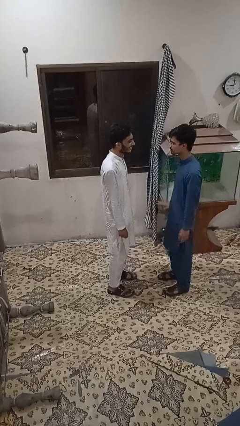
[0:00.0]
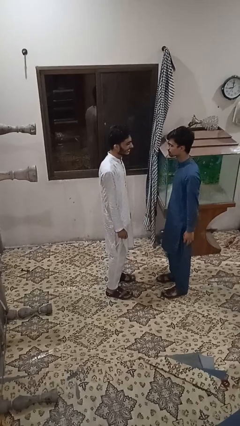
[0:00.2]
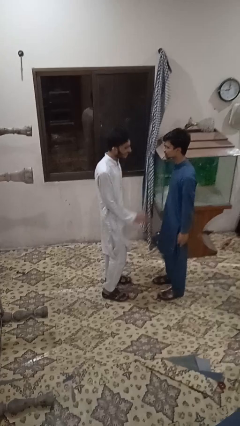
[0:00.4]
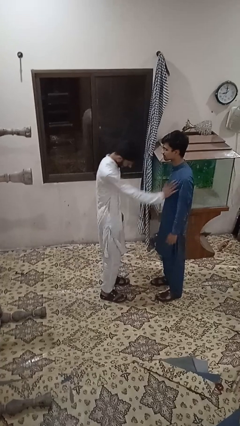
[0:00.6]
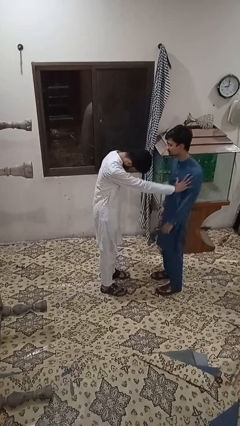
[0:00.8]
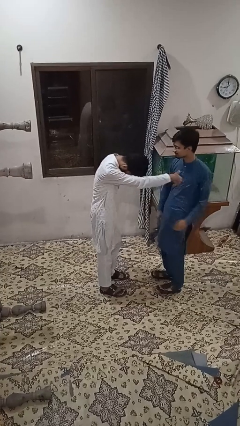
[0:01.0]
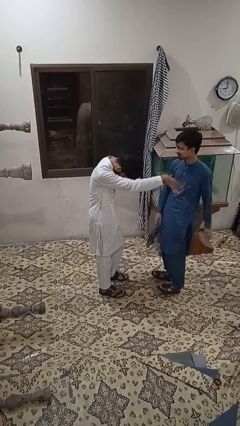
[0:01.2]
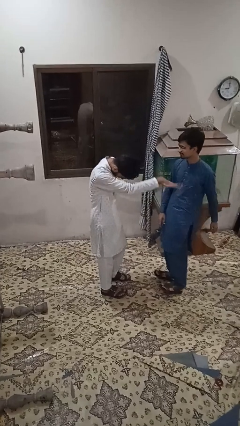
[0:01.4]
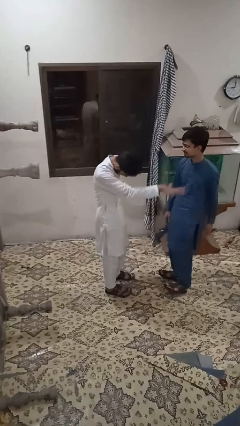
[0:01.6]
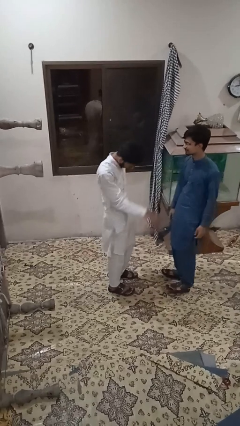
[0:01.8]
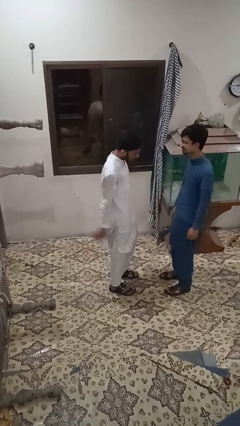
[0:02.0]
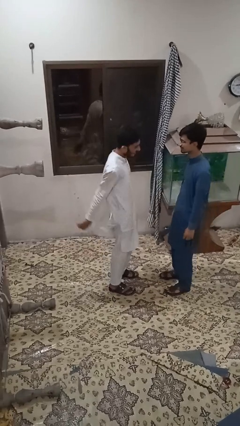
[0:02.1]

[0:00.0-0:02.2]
person shoves person

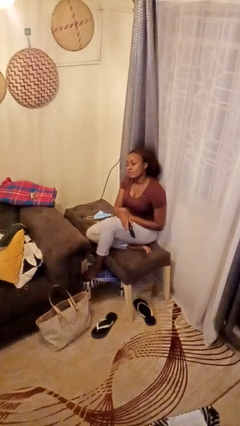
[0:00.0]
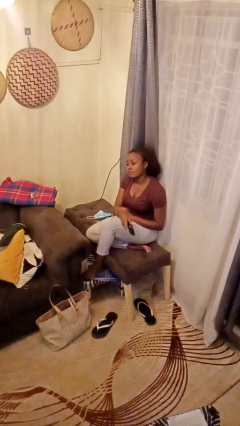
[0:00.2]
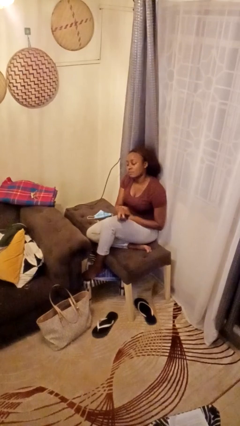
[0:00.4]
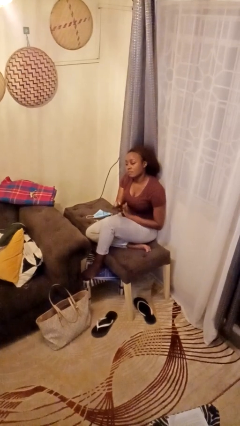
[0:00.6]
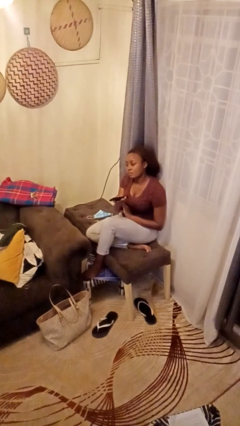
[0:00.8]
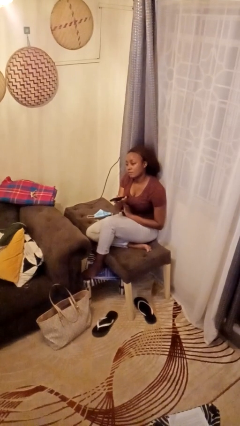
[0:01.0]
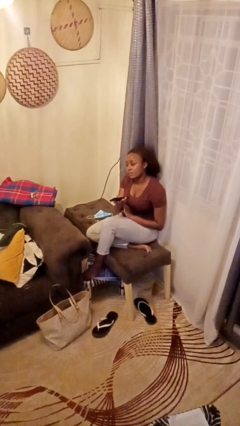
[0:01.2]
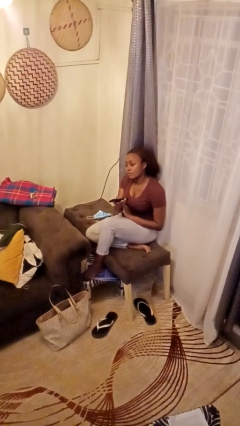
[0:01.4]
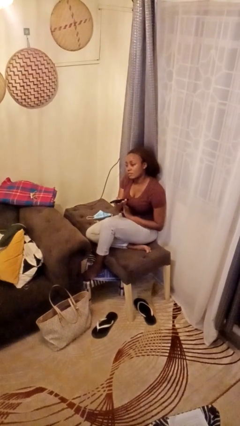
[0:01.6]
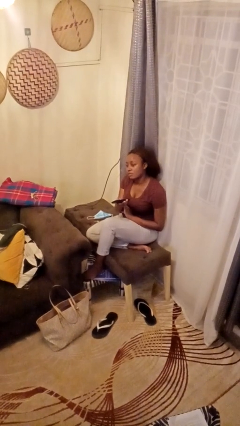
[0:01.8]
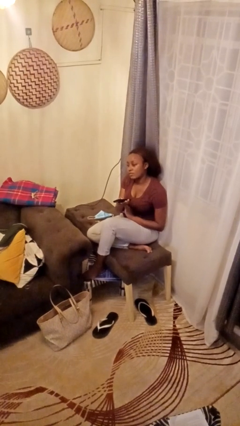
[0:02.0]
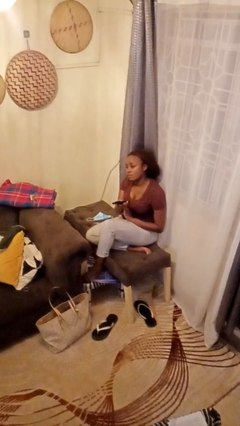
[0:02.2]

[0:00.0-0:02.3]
person uses television remote

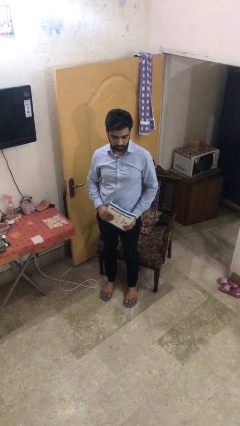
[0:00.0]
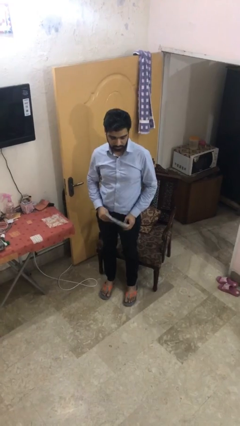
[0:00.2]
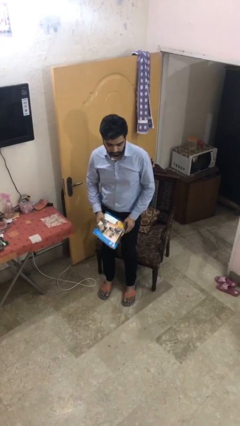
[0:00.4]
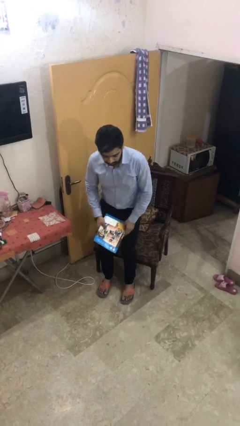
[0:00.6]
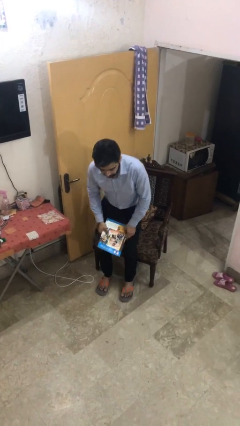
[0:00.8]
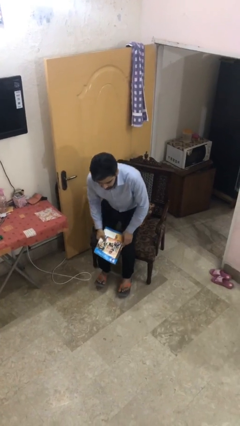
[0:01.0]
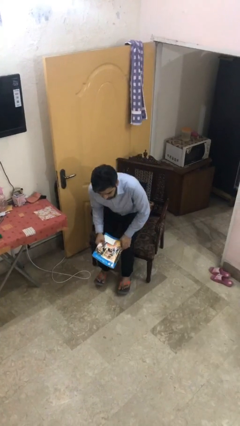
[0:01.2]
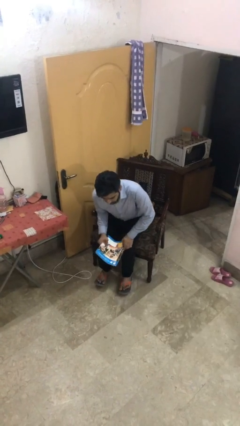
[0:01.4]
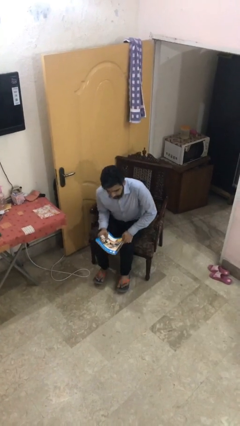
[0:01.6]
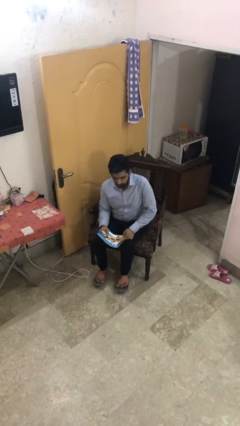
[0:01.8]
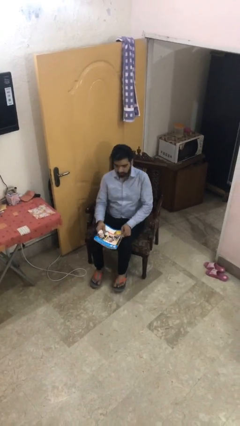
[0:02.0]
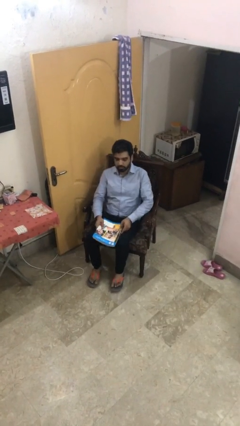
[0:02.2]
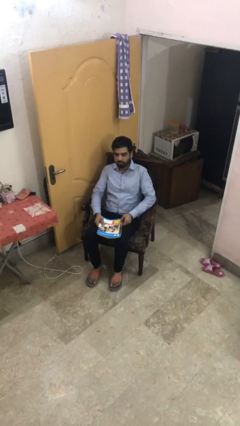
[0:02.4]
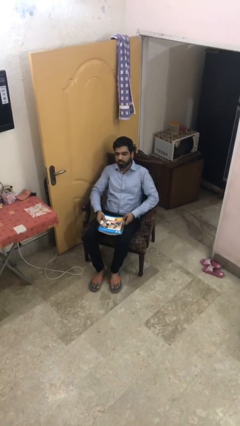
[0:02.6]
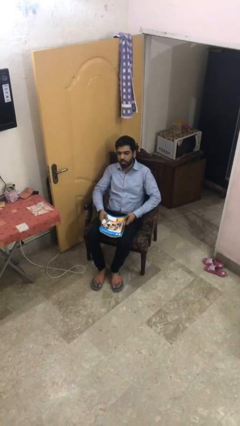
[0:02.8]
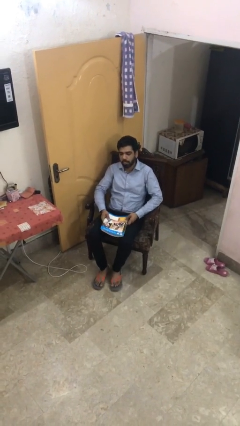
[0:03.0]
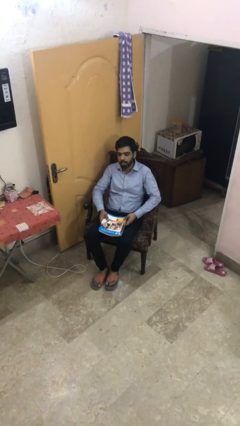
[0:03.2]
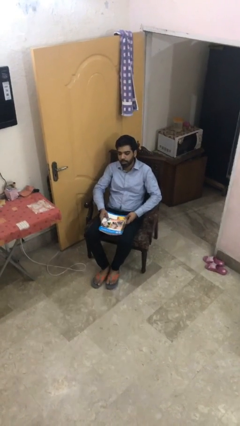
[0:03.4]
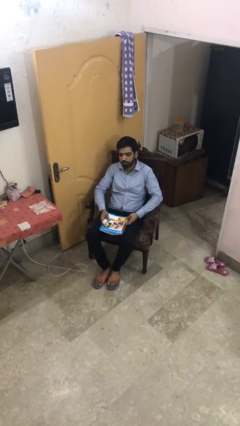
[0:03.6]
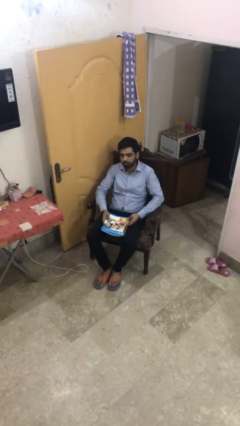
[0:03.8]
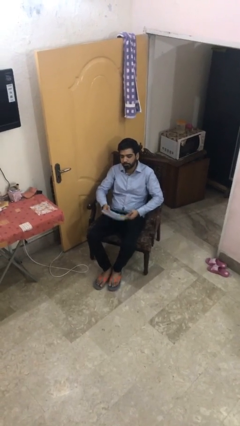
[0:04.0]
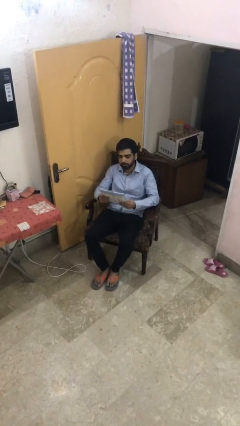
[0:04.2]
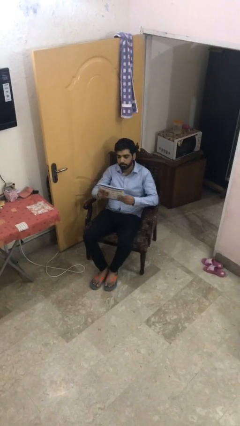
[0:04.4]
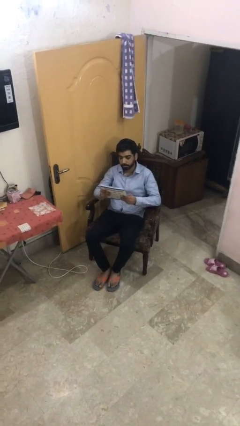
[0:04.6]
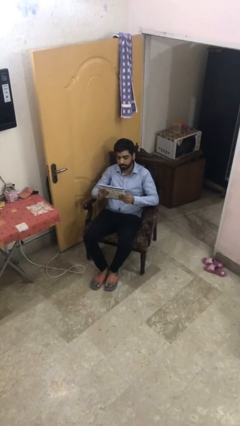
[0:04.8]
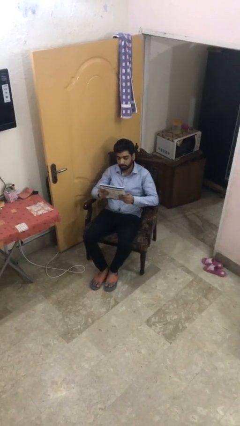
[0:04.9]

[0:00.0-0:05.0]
person sits down

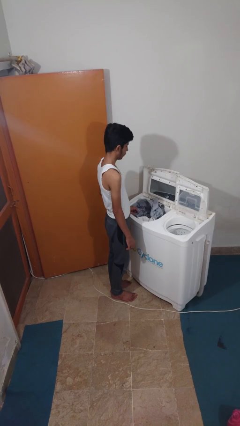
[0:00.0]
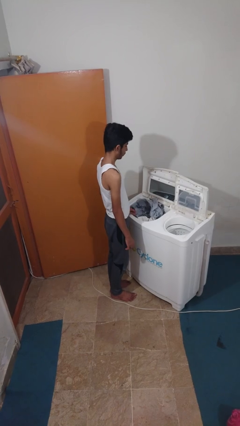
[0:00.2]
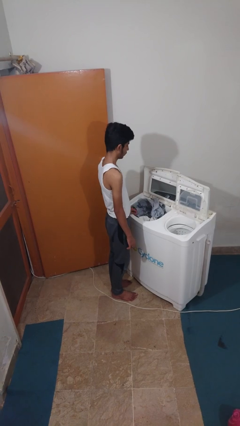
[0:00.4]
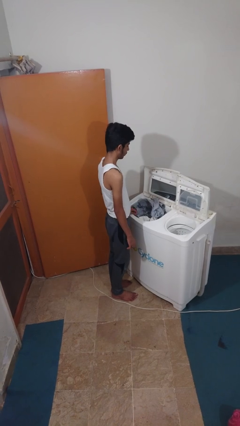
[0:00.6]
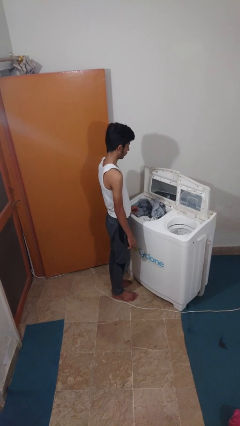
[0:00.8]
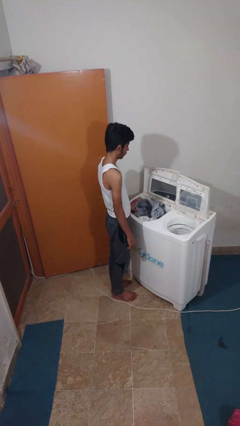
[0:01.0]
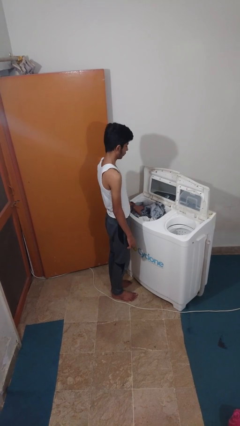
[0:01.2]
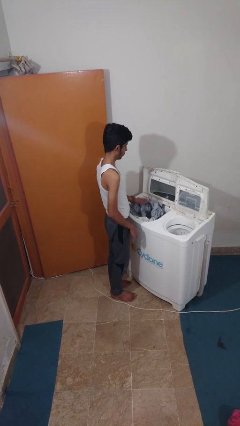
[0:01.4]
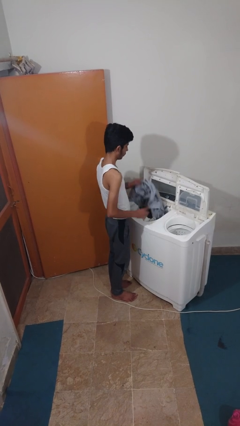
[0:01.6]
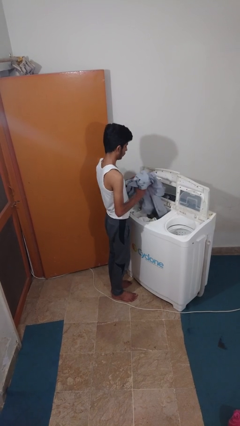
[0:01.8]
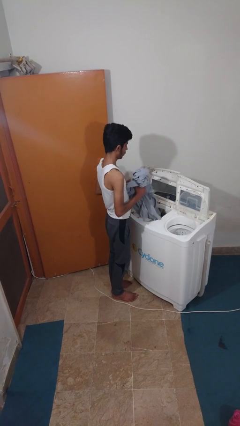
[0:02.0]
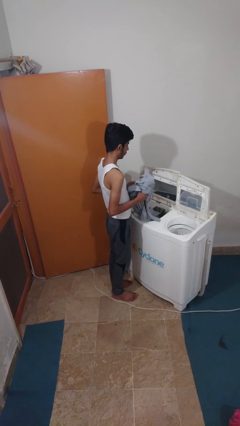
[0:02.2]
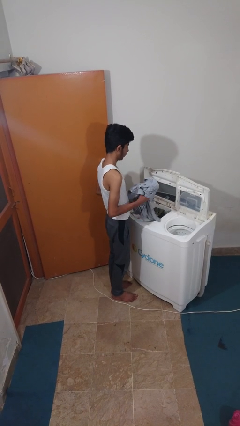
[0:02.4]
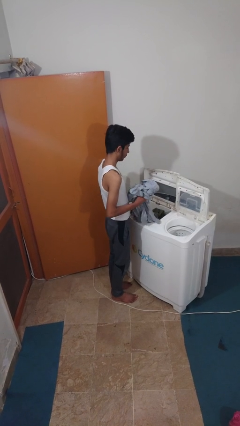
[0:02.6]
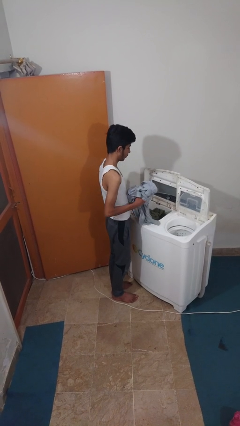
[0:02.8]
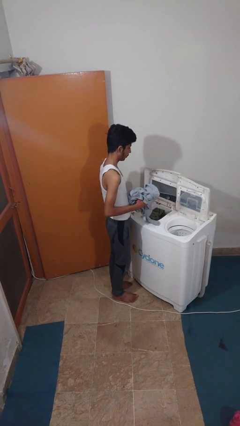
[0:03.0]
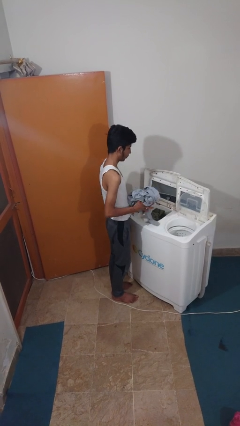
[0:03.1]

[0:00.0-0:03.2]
person unloads clotheswasher

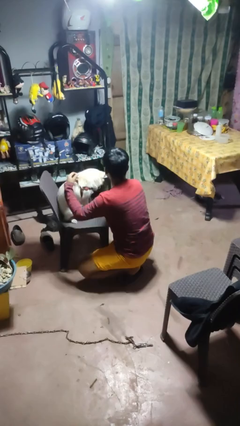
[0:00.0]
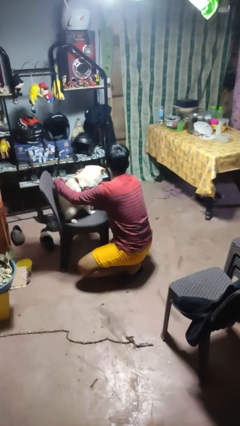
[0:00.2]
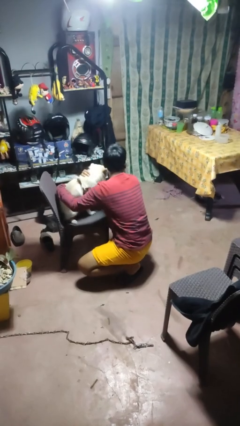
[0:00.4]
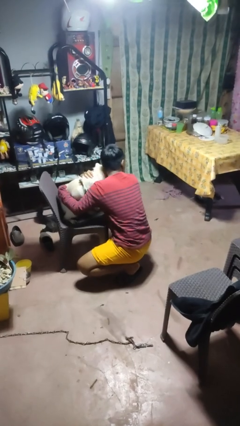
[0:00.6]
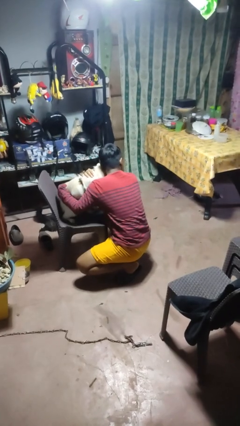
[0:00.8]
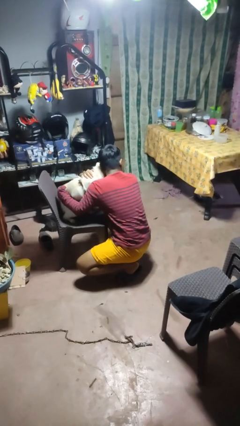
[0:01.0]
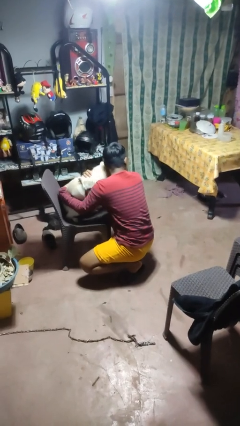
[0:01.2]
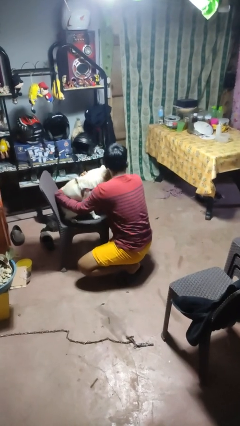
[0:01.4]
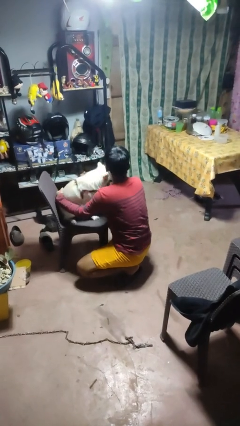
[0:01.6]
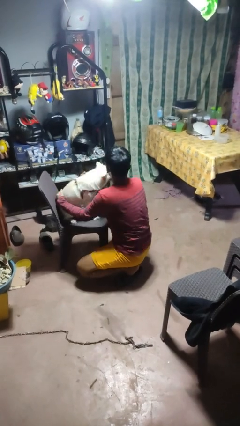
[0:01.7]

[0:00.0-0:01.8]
person hugs dog

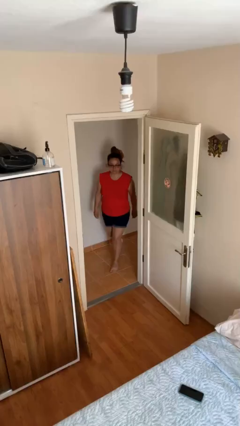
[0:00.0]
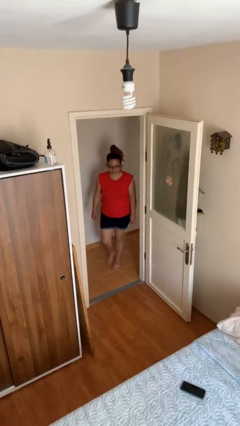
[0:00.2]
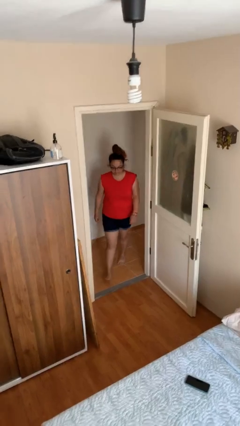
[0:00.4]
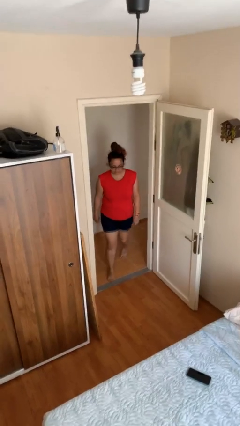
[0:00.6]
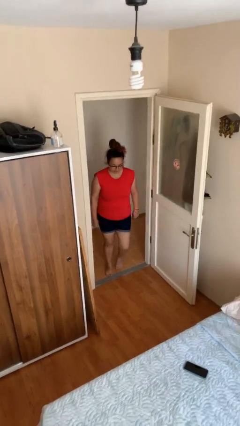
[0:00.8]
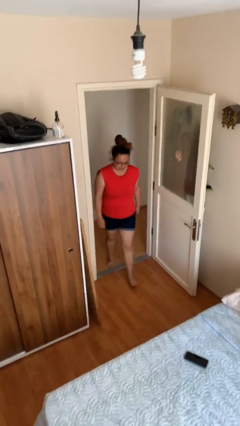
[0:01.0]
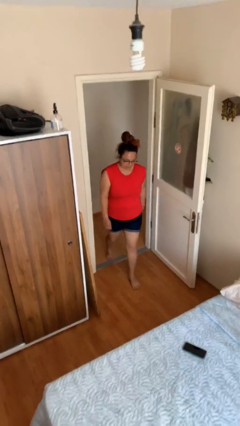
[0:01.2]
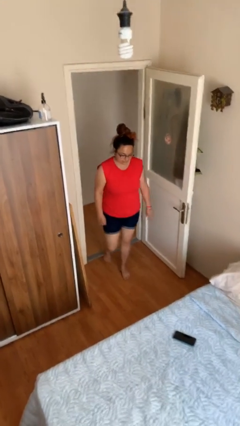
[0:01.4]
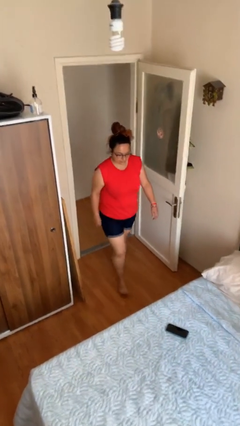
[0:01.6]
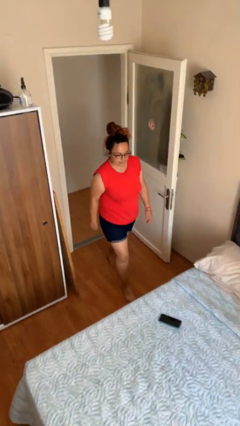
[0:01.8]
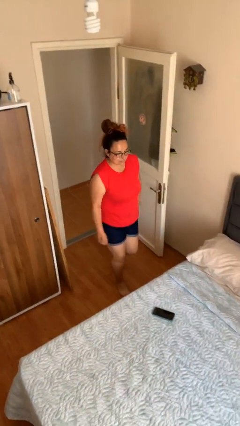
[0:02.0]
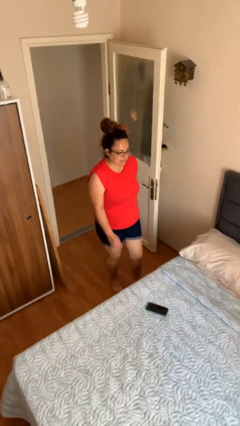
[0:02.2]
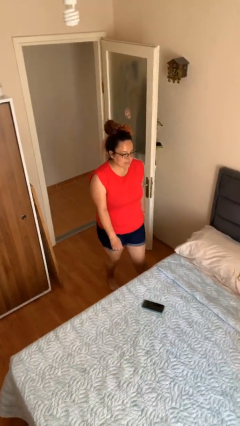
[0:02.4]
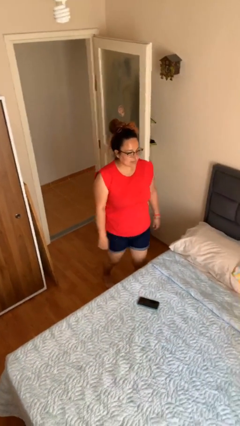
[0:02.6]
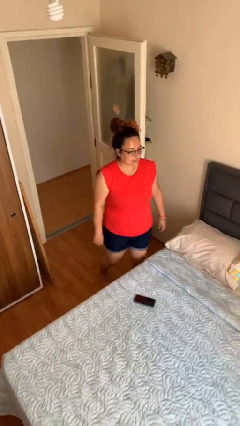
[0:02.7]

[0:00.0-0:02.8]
person enters scene through structure

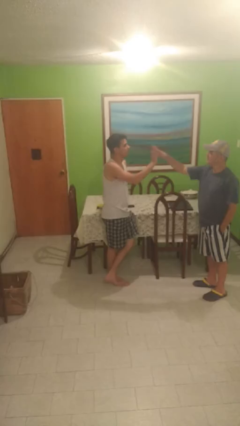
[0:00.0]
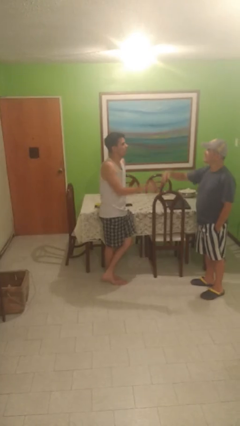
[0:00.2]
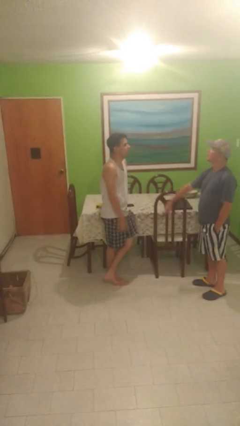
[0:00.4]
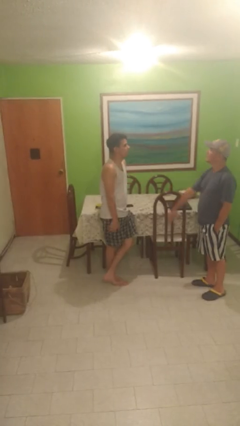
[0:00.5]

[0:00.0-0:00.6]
person highfives hand
